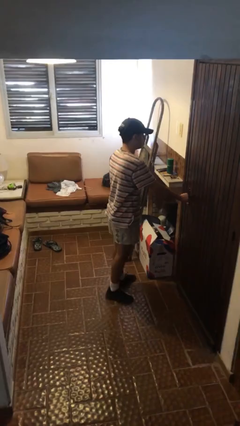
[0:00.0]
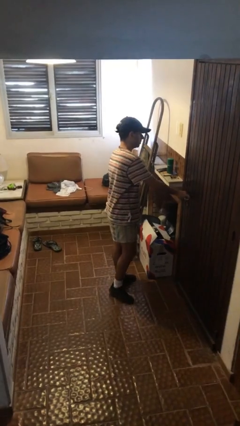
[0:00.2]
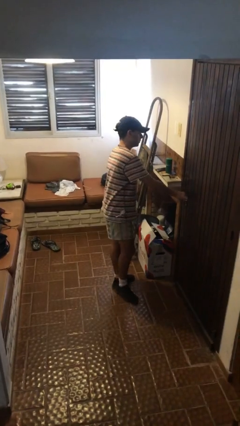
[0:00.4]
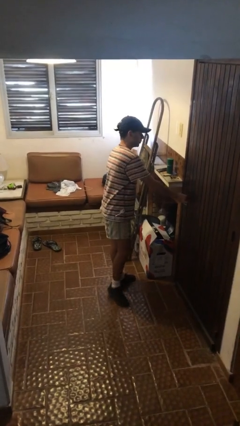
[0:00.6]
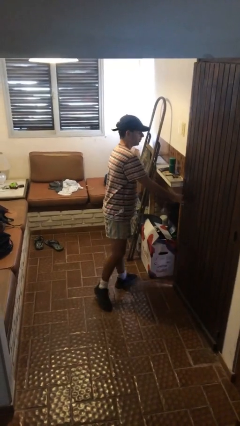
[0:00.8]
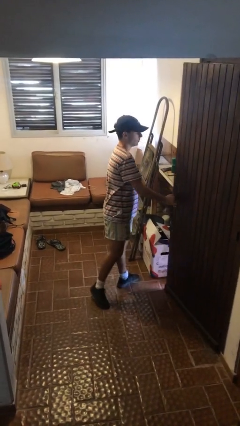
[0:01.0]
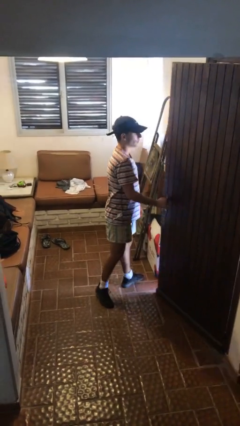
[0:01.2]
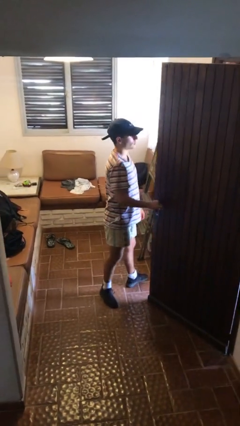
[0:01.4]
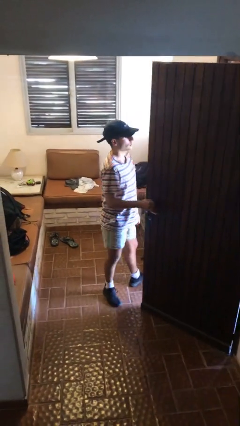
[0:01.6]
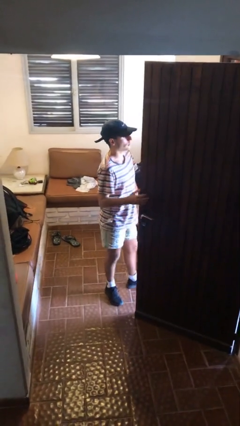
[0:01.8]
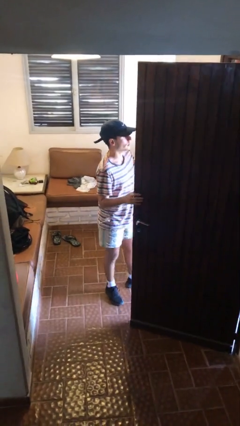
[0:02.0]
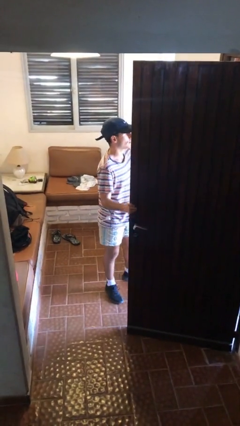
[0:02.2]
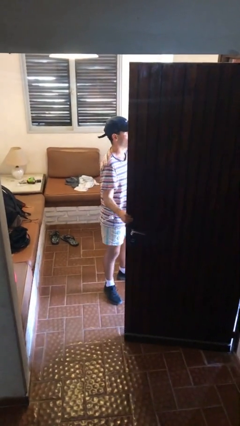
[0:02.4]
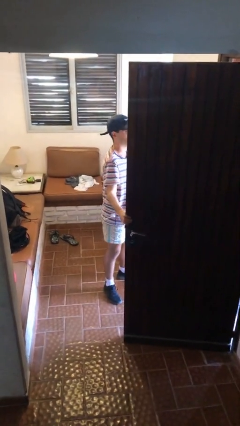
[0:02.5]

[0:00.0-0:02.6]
person opens facility door

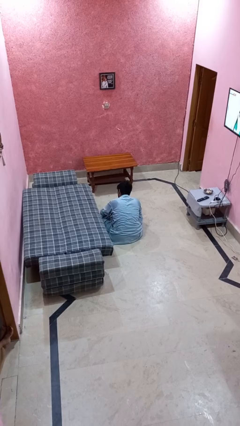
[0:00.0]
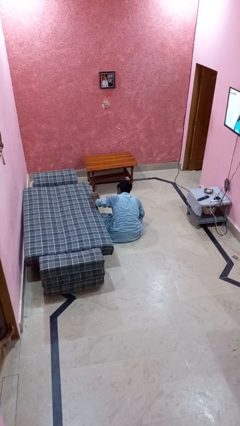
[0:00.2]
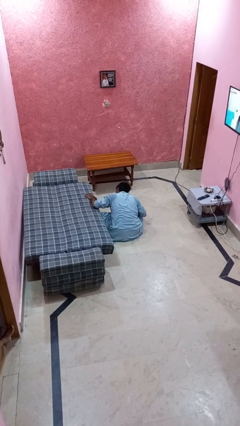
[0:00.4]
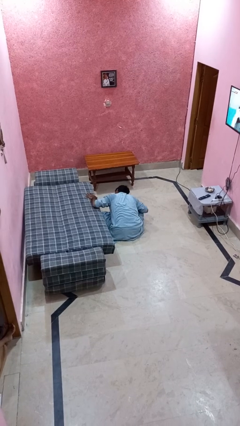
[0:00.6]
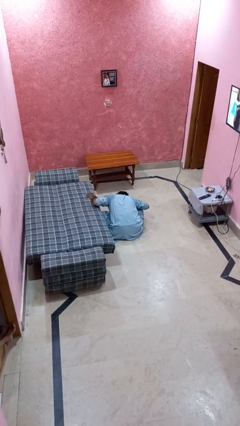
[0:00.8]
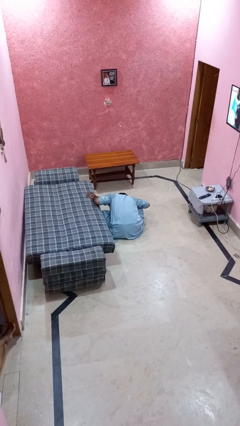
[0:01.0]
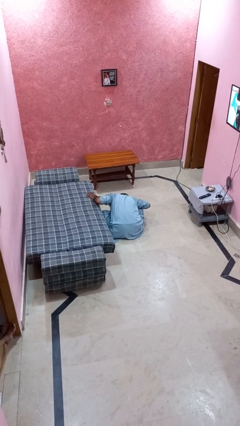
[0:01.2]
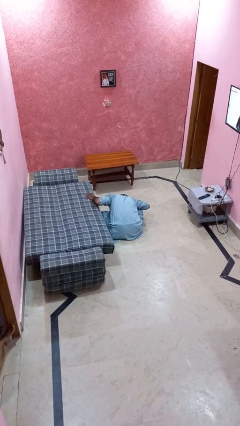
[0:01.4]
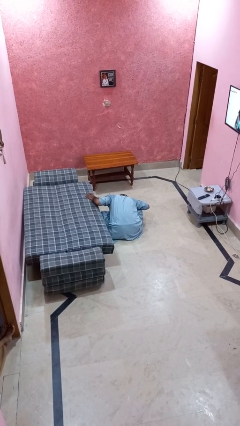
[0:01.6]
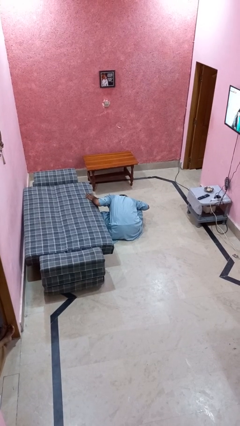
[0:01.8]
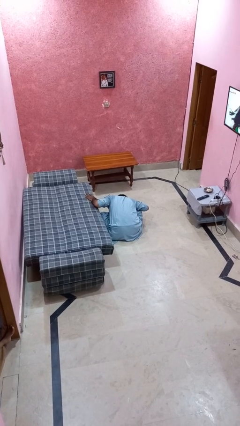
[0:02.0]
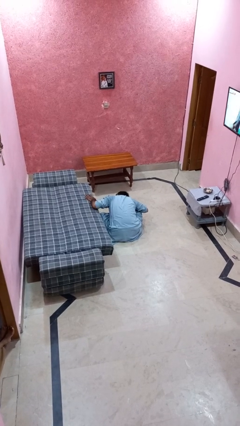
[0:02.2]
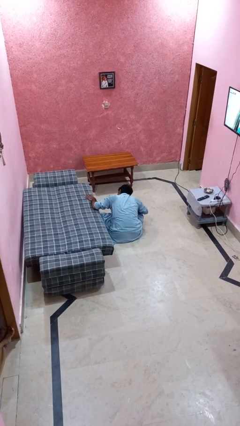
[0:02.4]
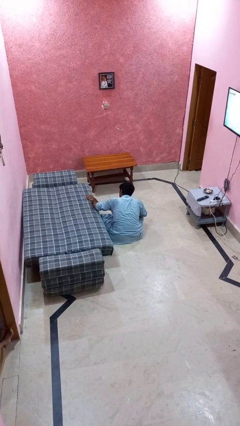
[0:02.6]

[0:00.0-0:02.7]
person searches under bed

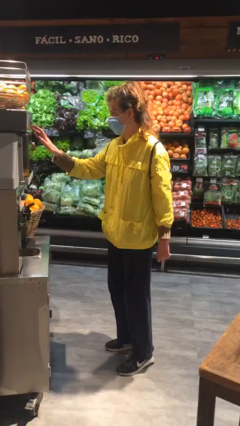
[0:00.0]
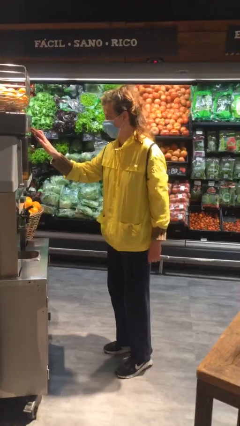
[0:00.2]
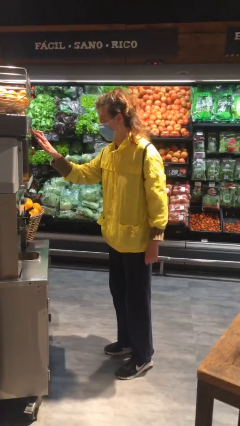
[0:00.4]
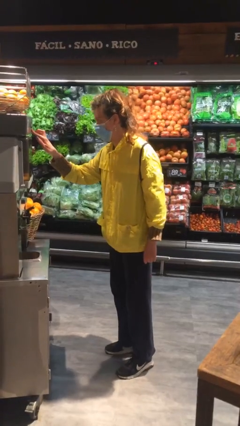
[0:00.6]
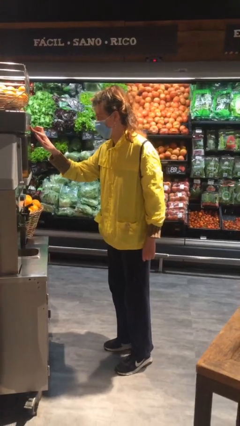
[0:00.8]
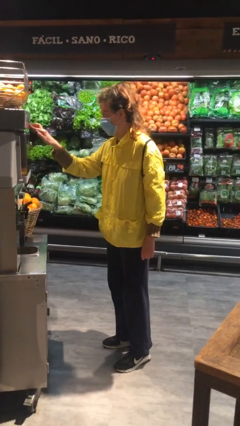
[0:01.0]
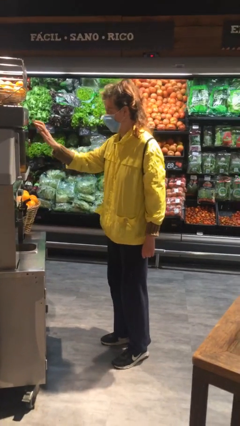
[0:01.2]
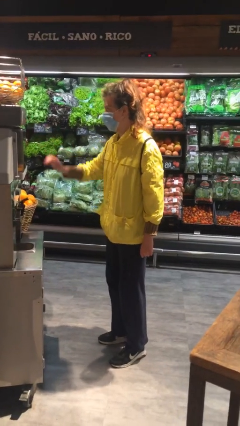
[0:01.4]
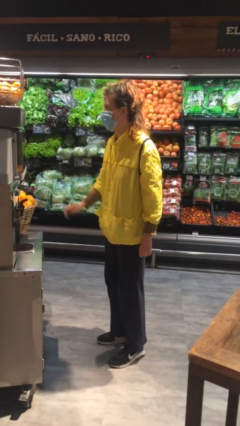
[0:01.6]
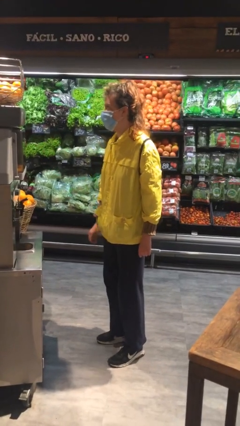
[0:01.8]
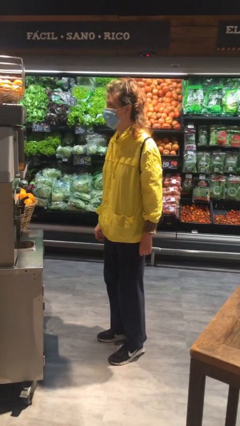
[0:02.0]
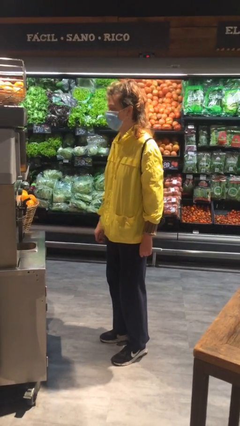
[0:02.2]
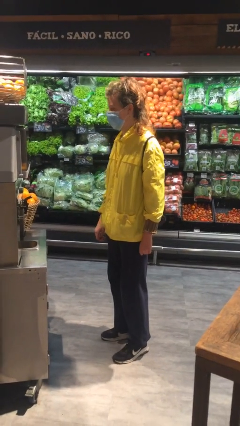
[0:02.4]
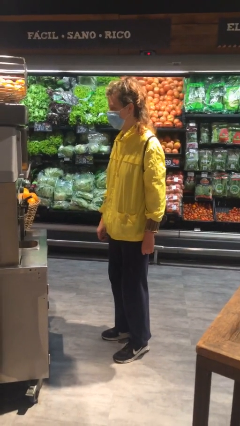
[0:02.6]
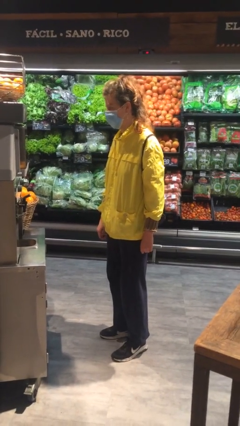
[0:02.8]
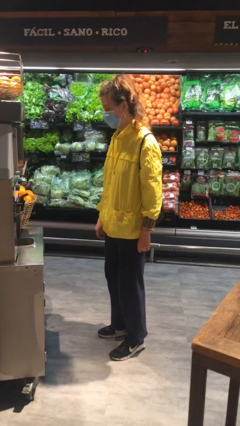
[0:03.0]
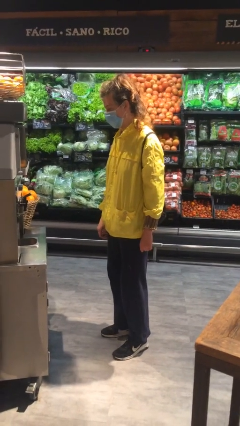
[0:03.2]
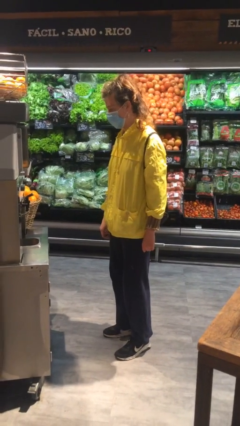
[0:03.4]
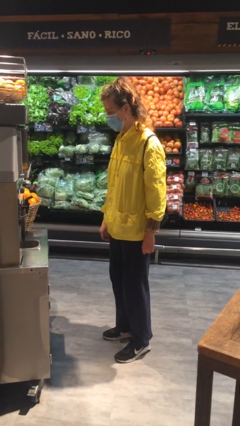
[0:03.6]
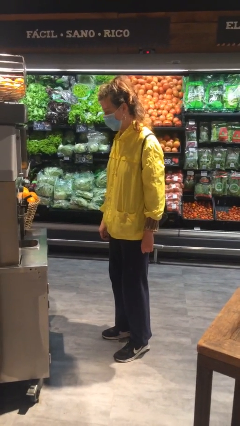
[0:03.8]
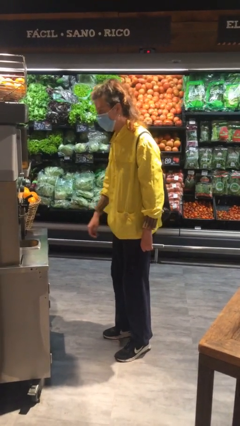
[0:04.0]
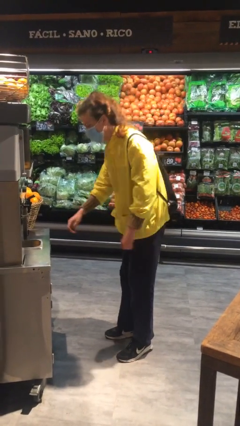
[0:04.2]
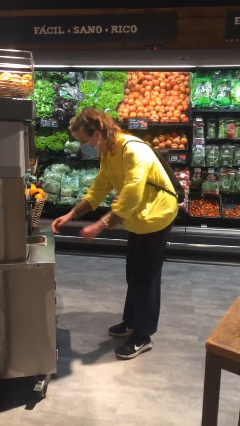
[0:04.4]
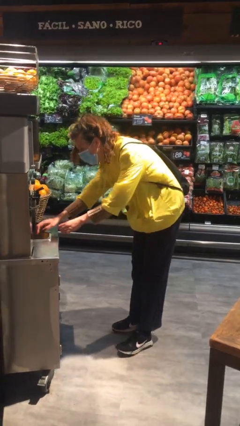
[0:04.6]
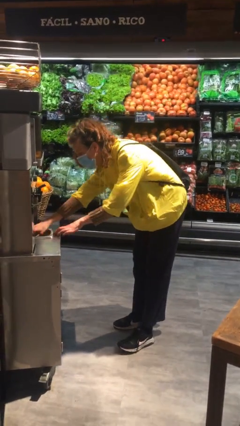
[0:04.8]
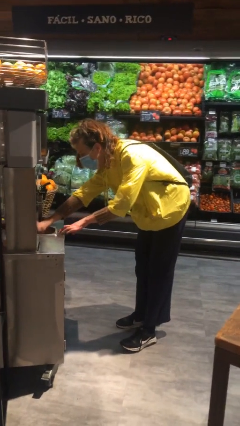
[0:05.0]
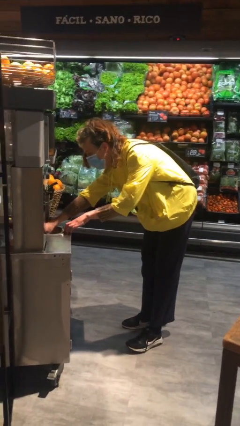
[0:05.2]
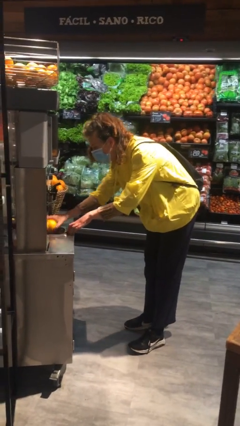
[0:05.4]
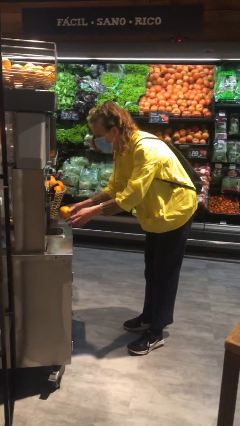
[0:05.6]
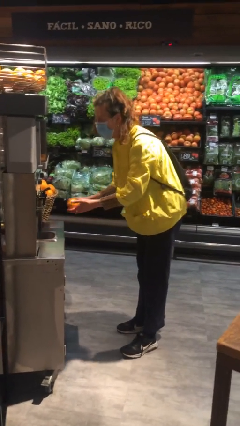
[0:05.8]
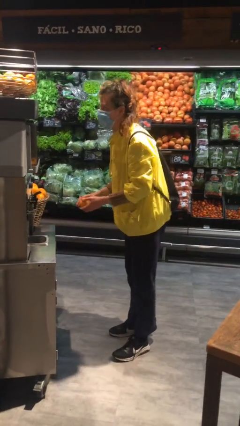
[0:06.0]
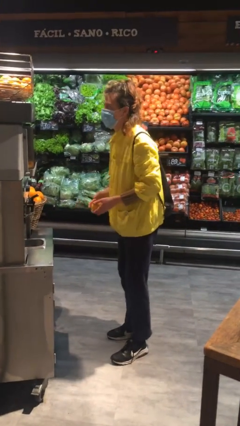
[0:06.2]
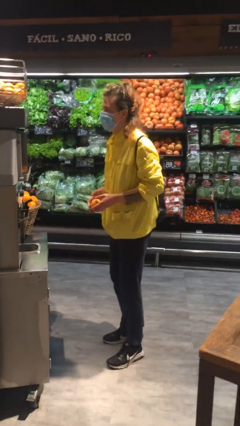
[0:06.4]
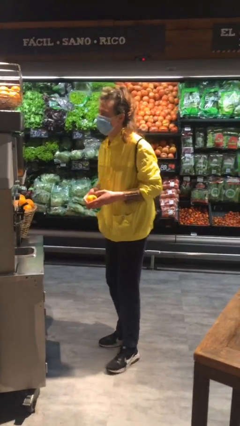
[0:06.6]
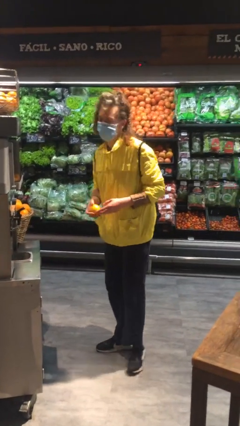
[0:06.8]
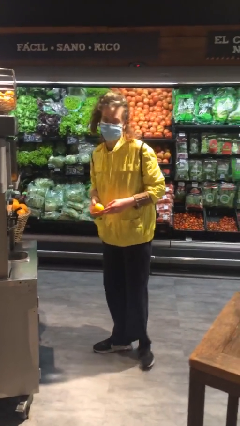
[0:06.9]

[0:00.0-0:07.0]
person purchases from machine

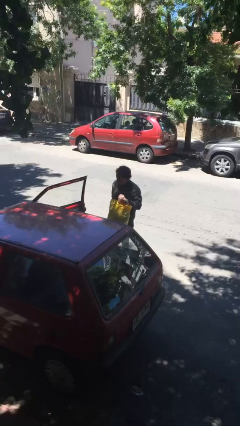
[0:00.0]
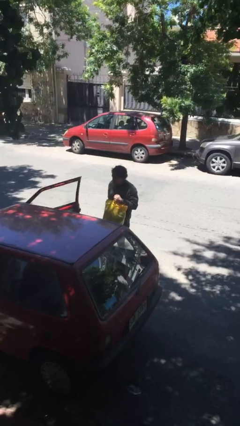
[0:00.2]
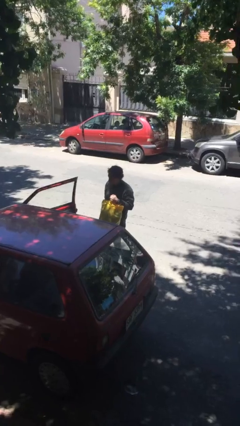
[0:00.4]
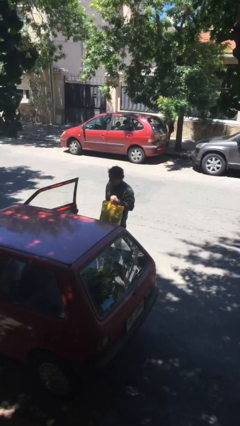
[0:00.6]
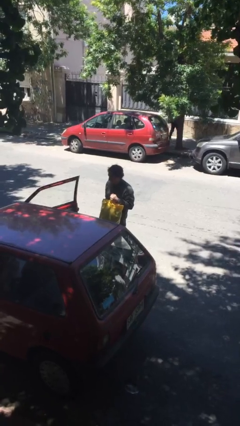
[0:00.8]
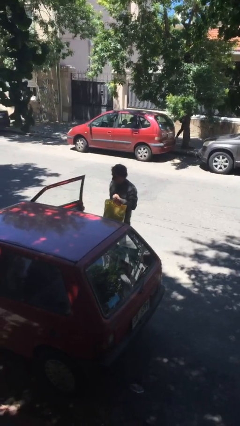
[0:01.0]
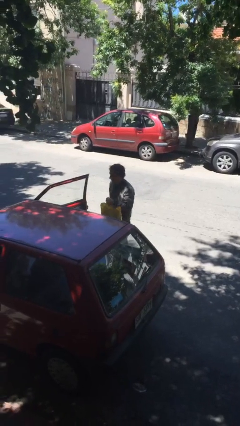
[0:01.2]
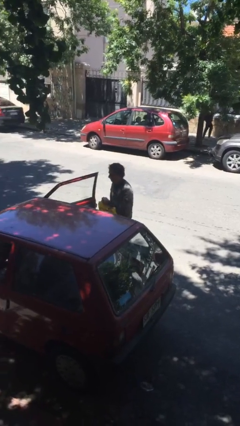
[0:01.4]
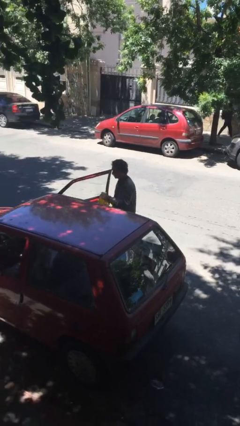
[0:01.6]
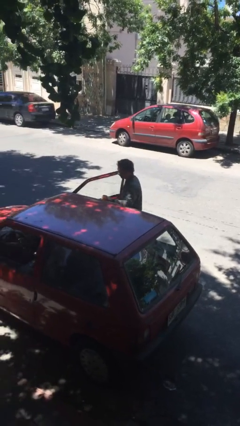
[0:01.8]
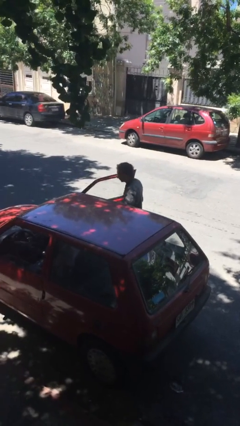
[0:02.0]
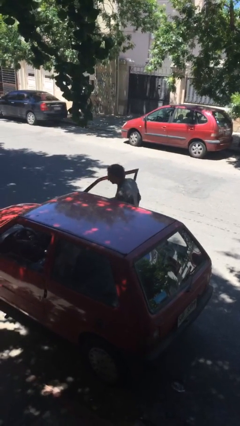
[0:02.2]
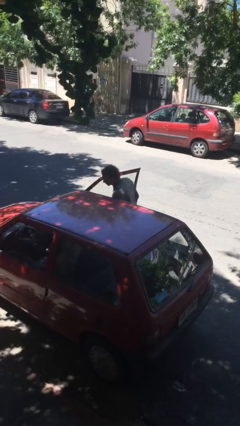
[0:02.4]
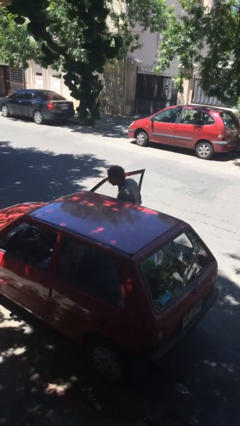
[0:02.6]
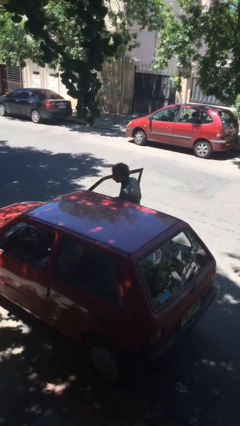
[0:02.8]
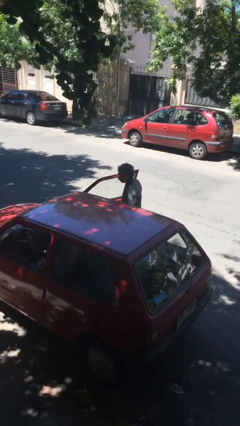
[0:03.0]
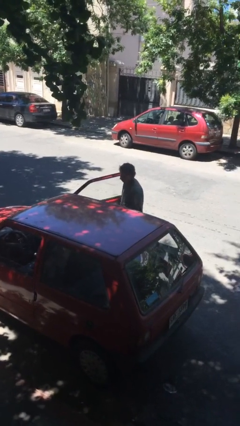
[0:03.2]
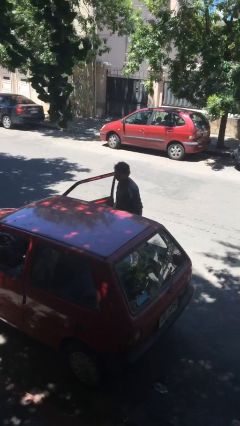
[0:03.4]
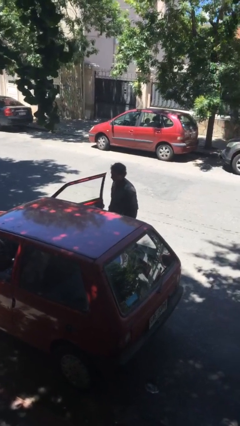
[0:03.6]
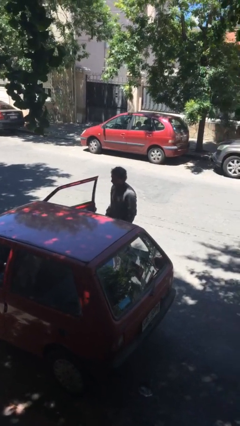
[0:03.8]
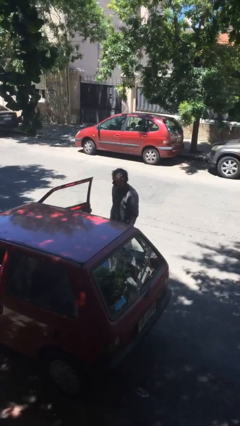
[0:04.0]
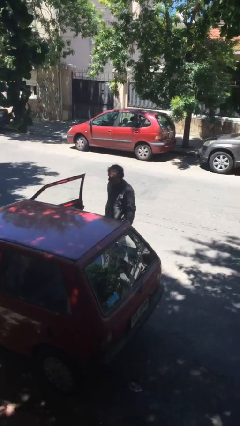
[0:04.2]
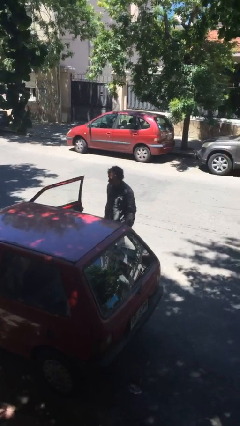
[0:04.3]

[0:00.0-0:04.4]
person loads car

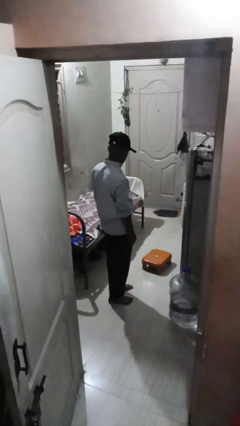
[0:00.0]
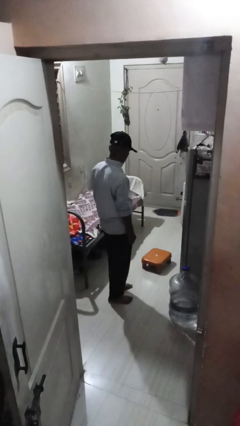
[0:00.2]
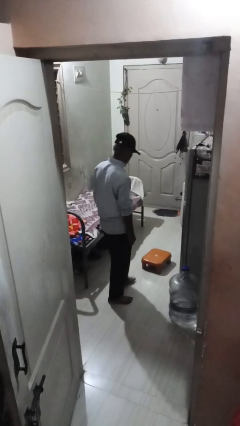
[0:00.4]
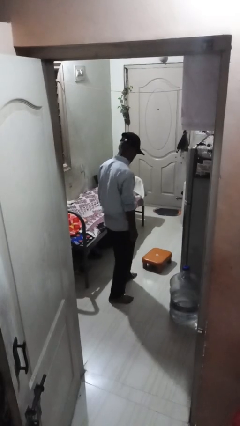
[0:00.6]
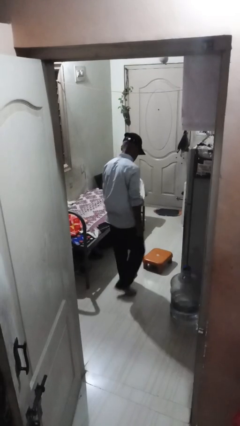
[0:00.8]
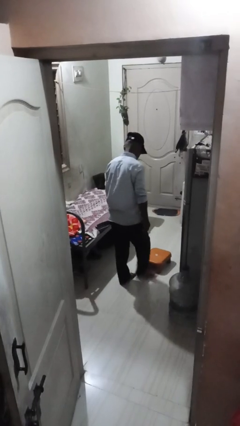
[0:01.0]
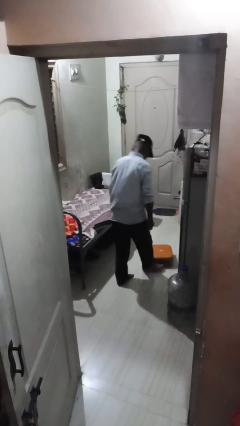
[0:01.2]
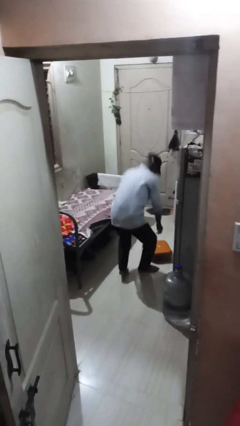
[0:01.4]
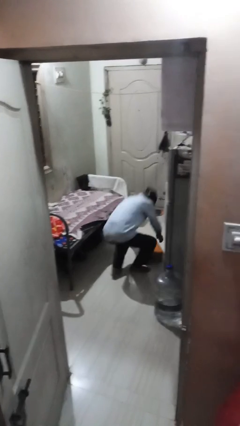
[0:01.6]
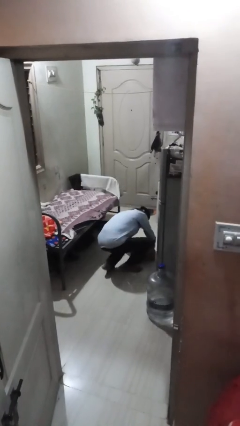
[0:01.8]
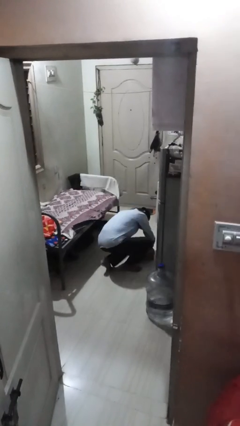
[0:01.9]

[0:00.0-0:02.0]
person trips on object on floor
